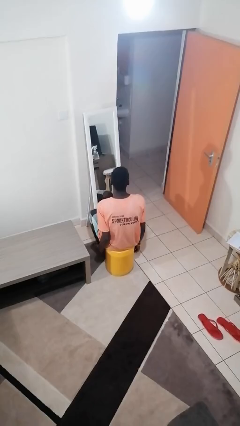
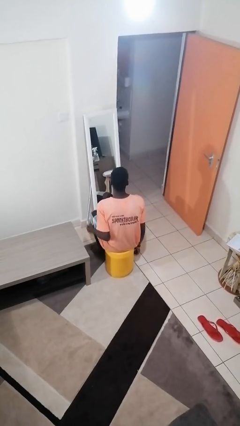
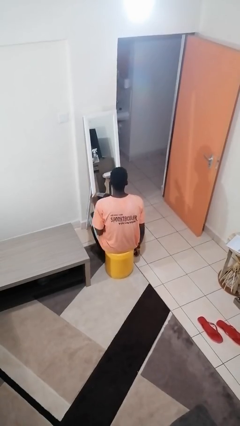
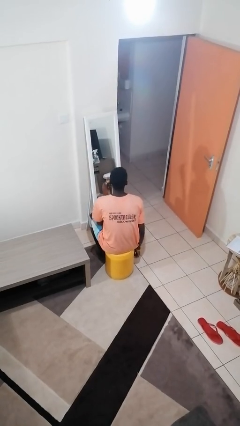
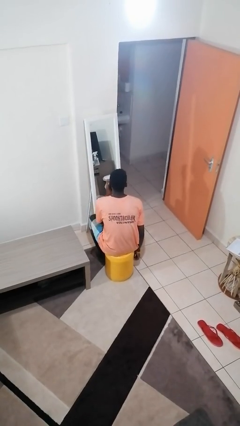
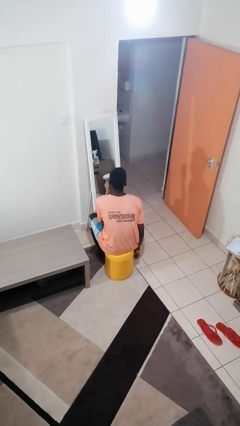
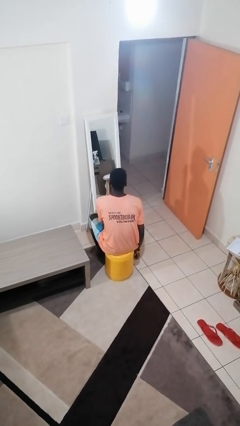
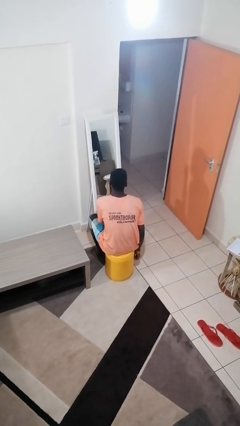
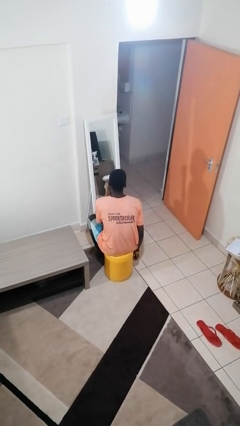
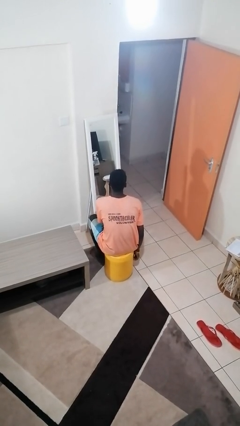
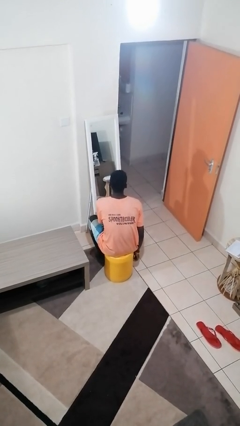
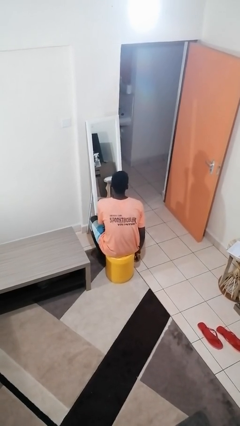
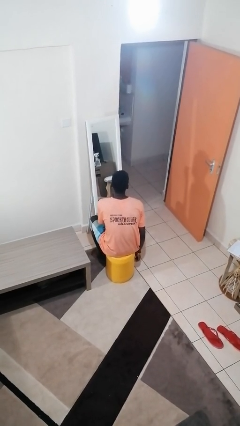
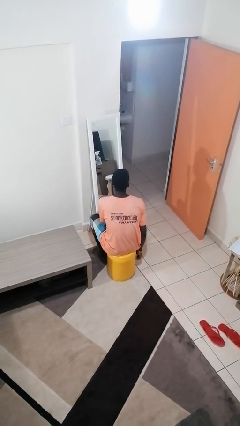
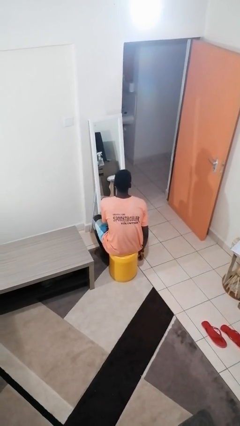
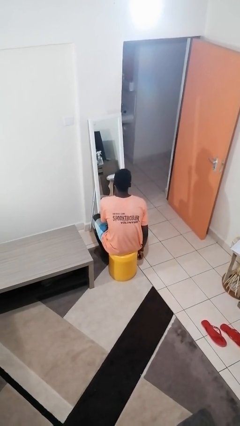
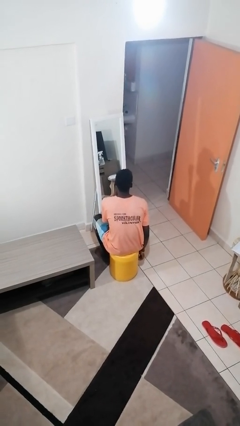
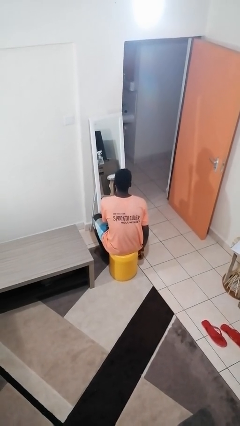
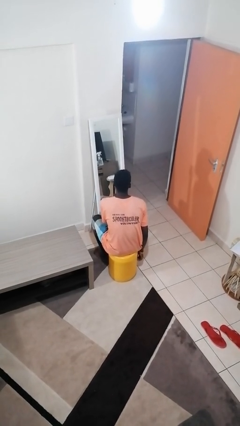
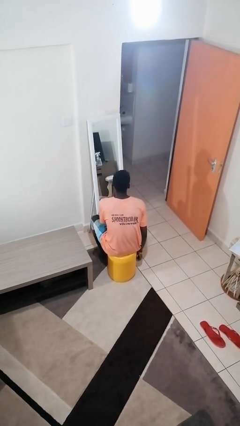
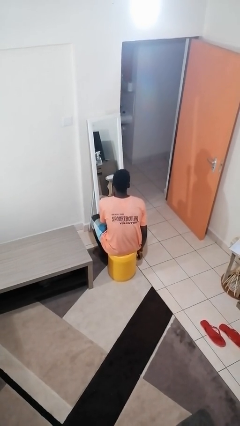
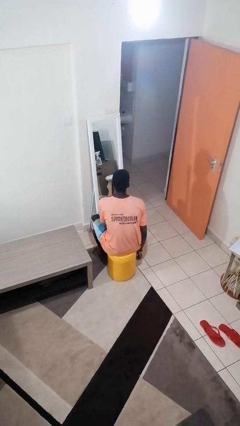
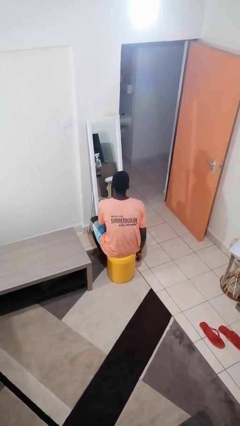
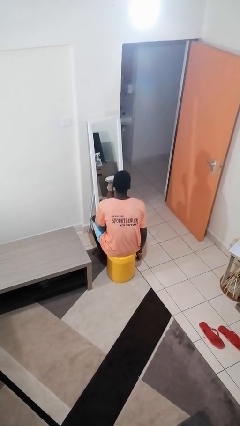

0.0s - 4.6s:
person applies lip makeup

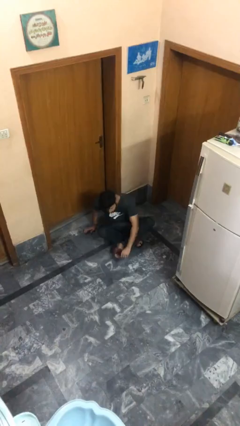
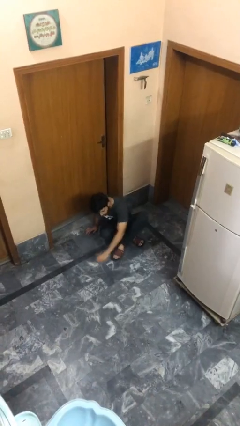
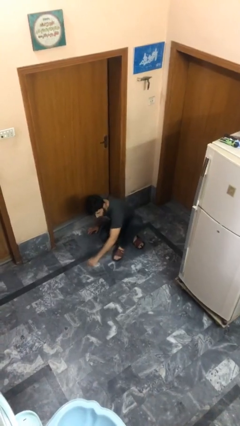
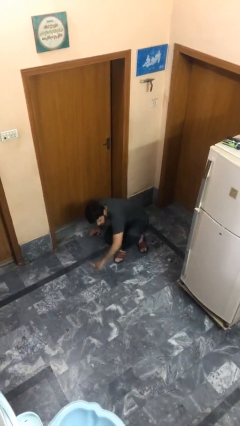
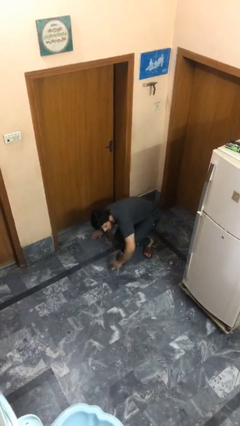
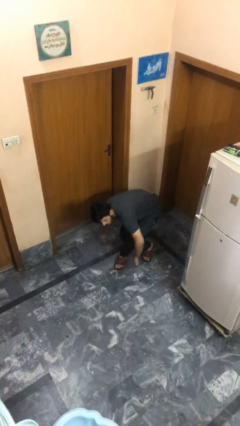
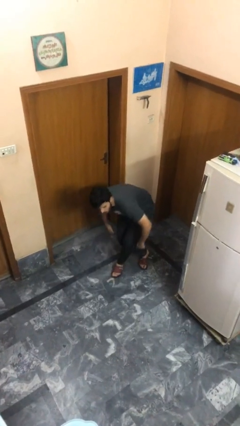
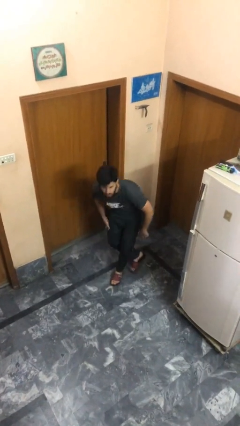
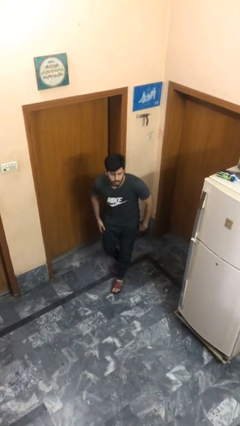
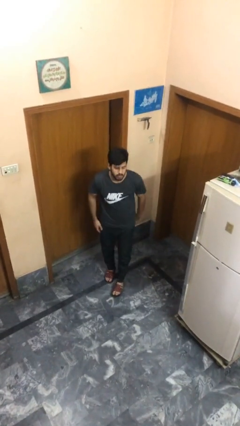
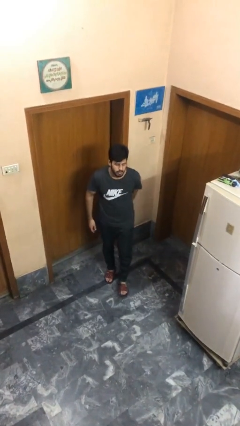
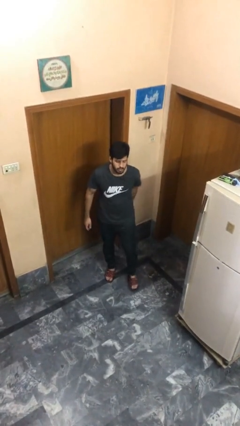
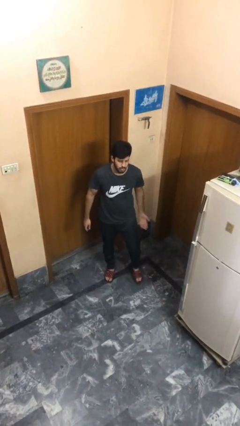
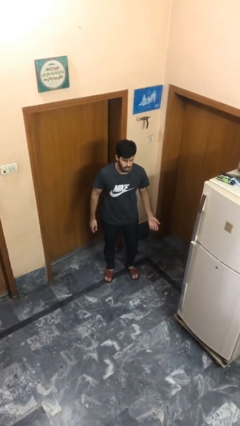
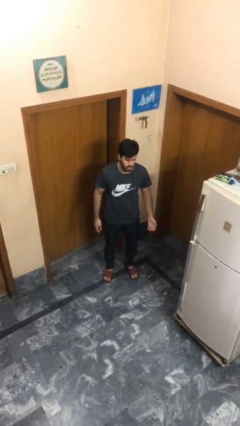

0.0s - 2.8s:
person stands up from floor

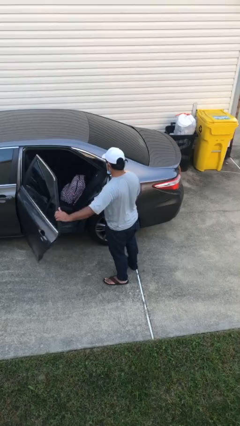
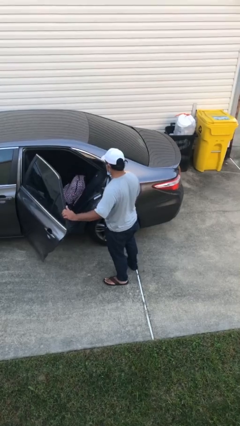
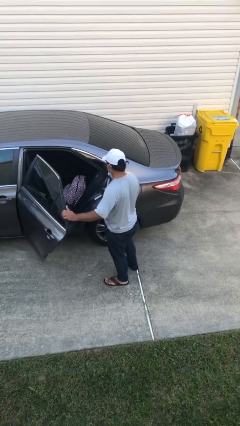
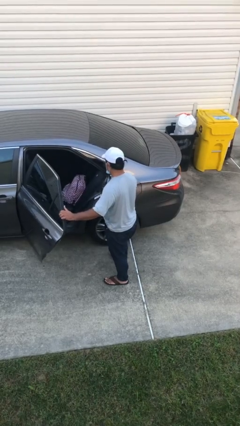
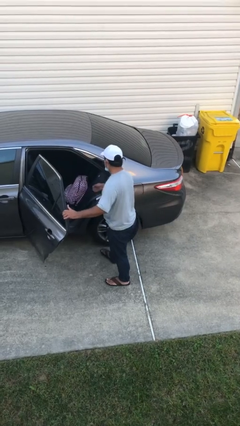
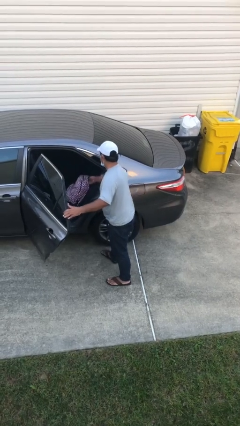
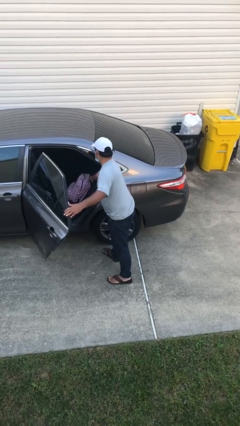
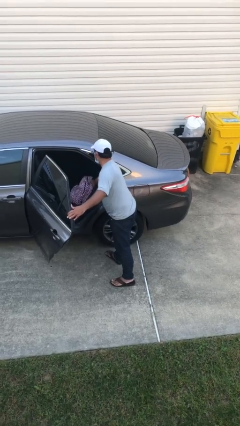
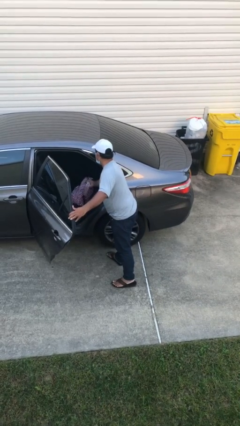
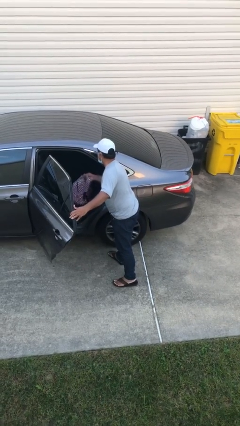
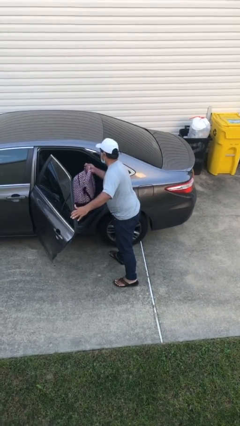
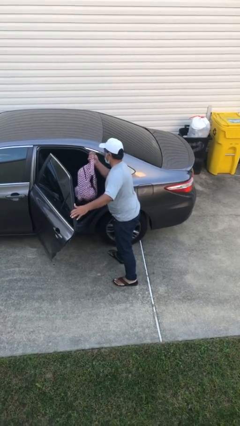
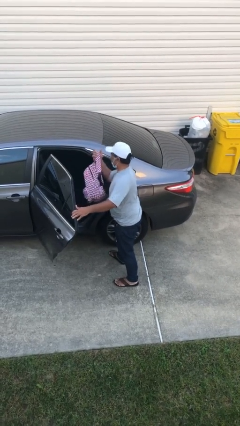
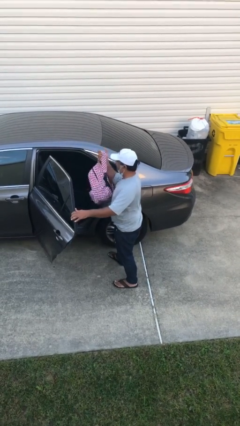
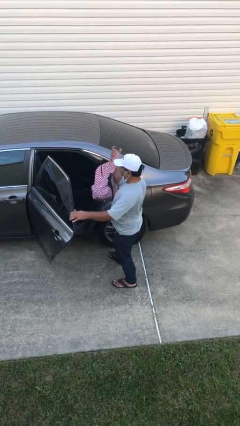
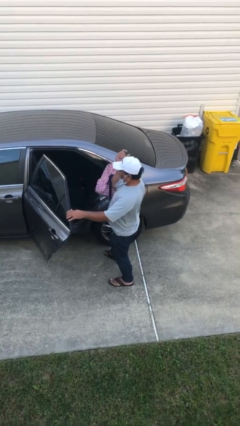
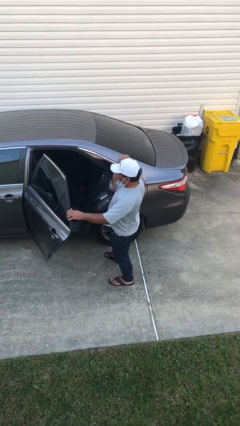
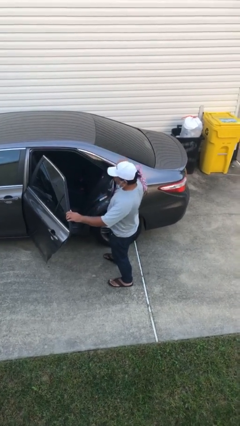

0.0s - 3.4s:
person unloads car

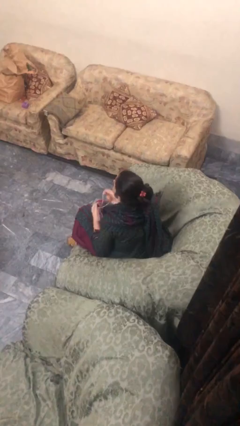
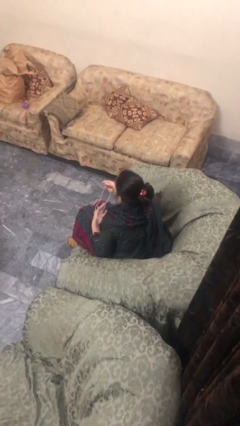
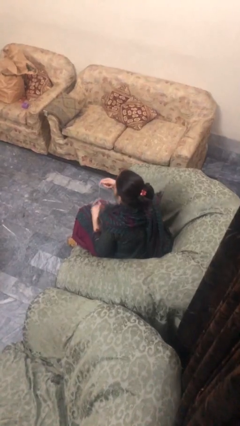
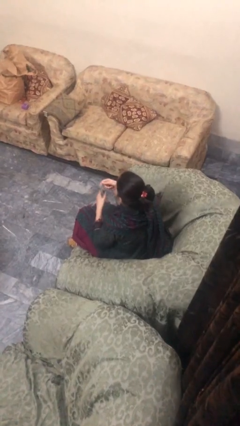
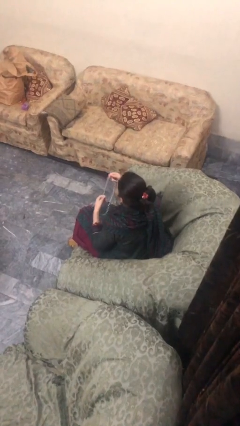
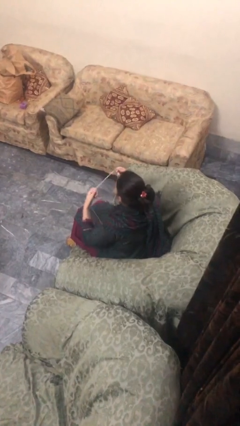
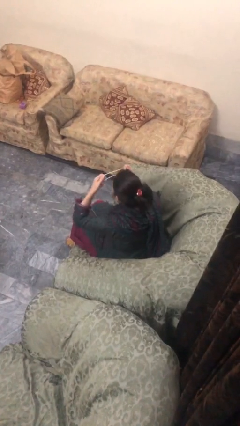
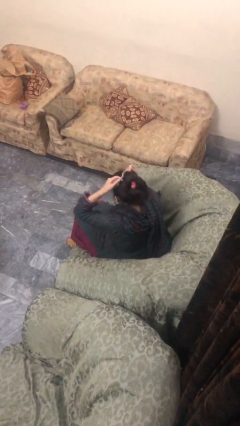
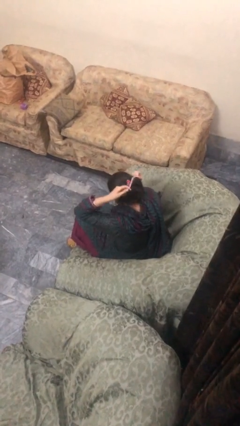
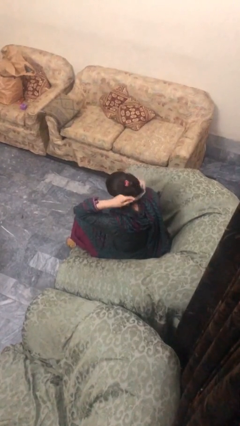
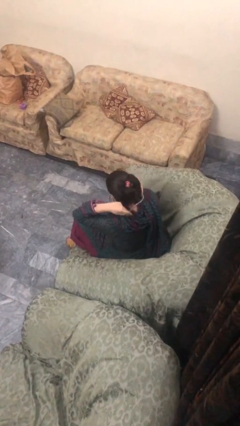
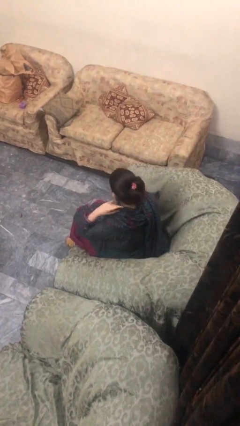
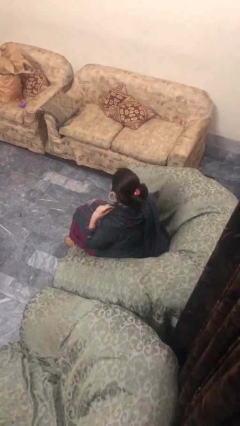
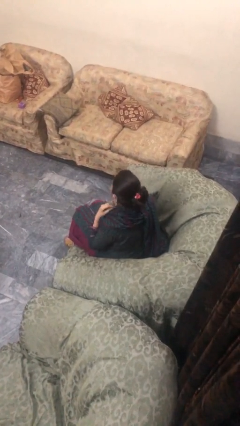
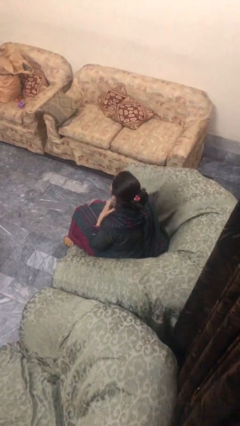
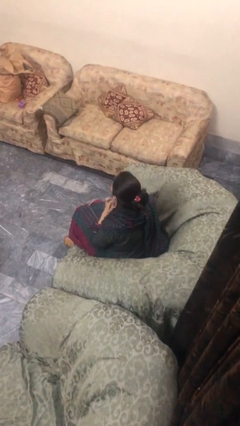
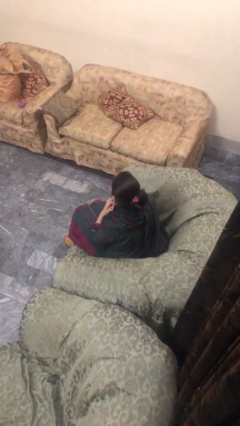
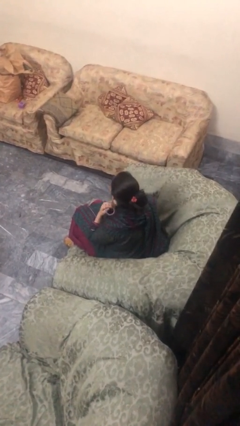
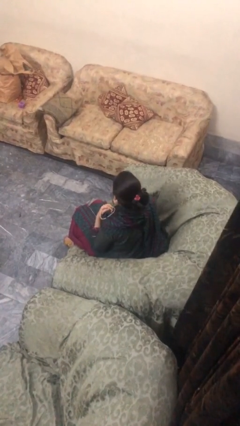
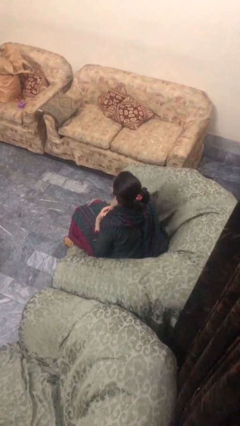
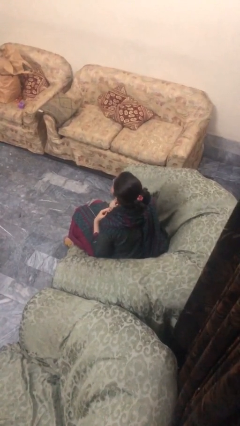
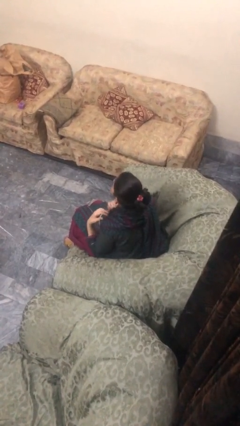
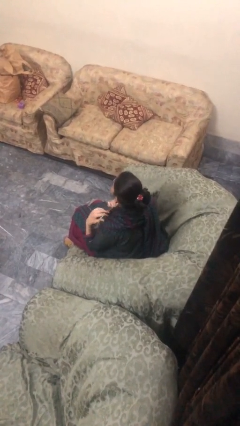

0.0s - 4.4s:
person puts on necklace

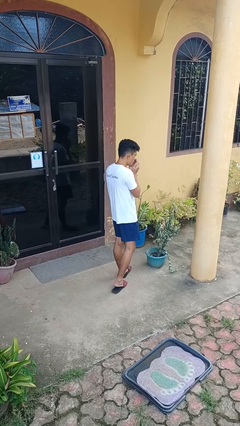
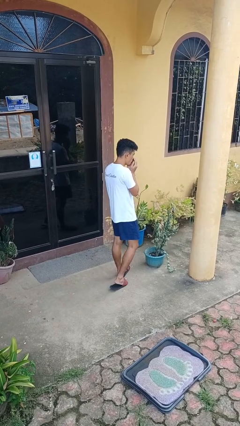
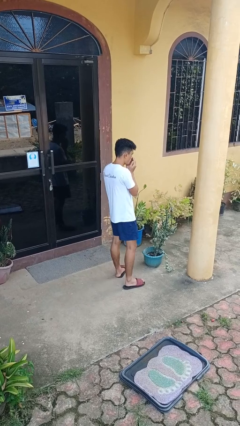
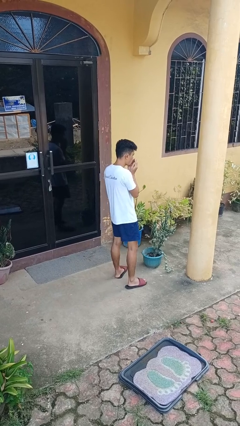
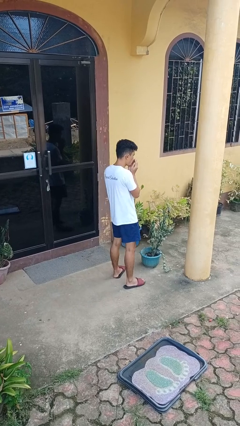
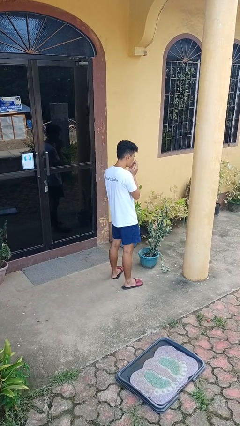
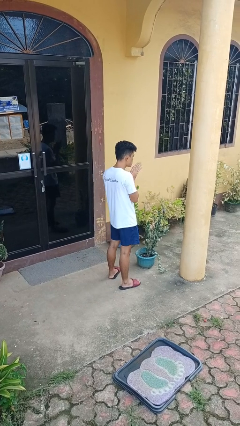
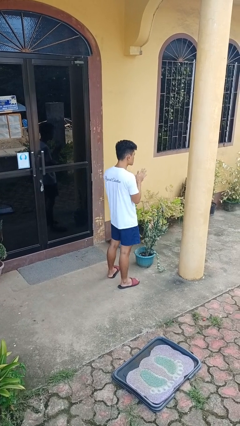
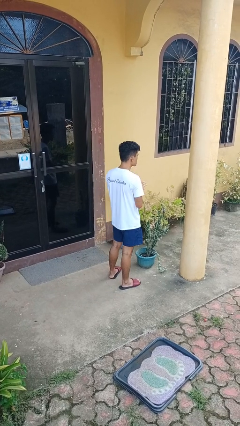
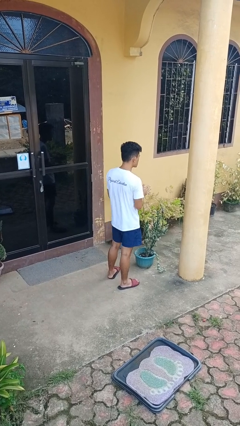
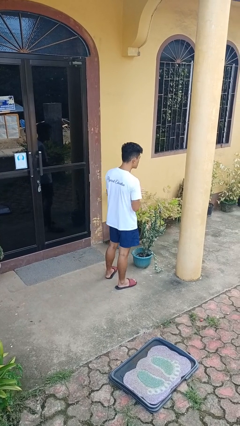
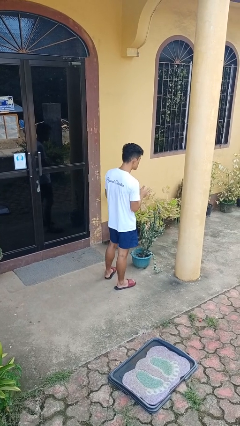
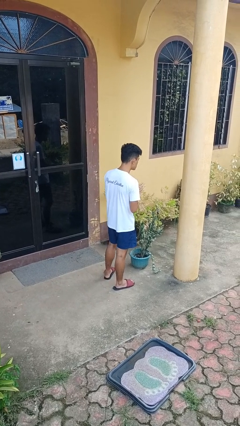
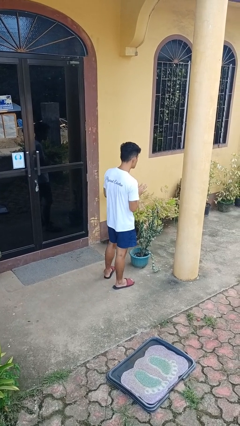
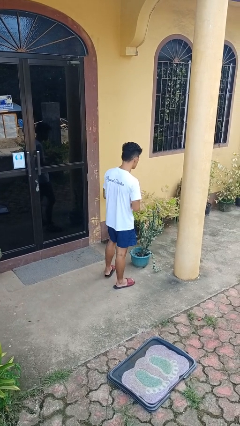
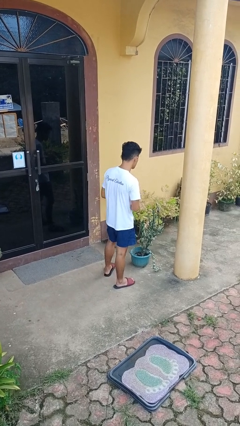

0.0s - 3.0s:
person blows into hands
